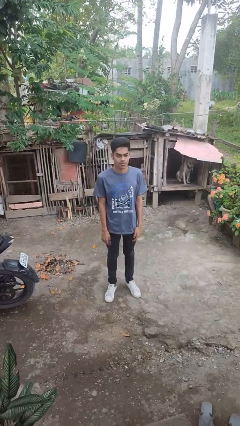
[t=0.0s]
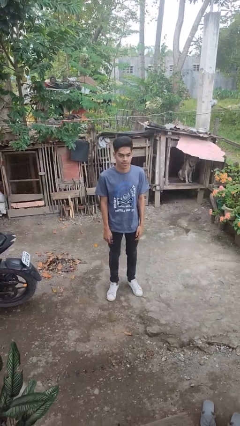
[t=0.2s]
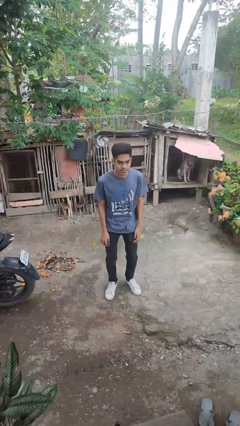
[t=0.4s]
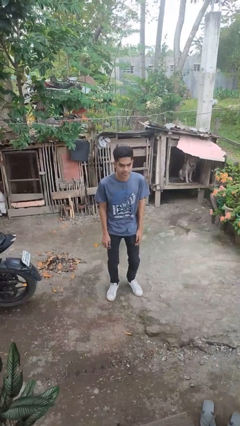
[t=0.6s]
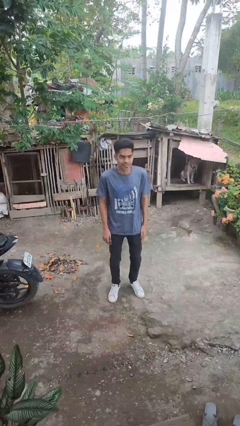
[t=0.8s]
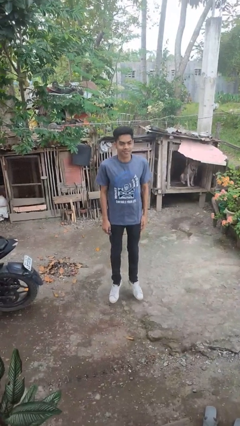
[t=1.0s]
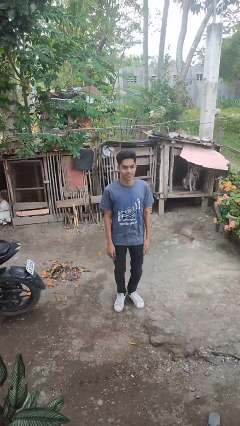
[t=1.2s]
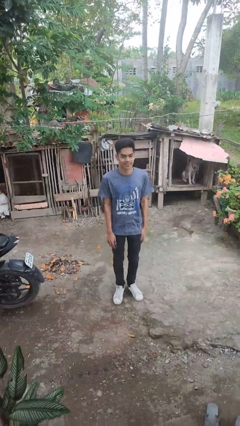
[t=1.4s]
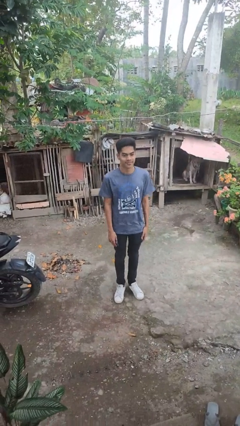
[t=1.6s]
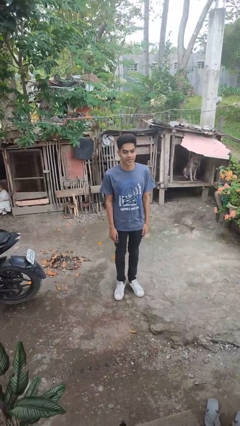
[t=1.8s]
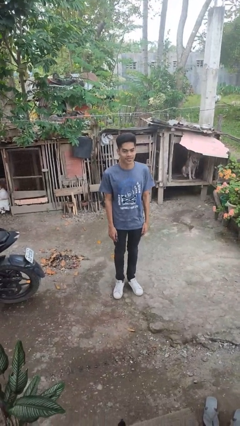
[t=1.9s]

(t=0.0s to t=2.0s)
person jumps

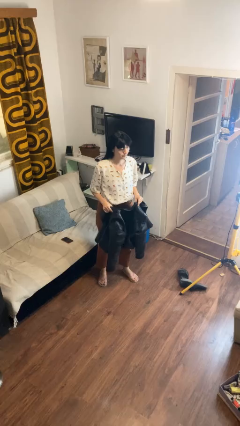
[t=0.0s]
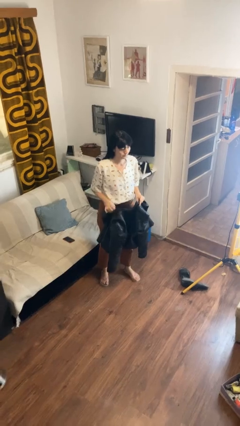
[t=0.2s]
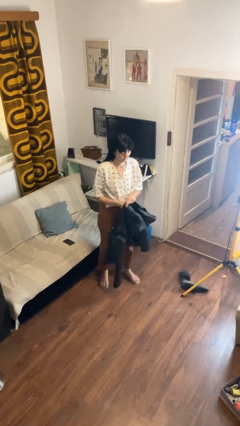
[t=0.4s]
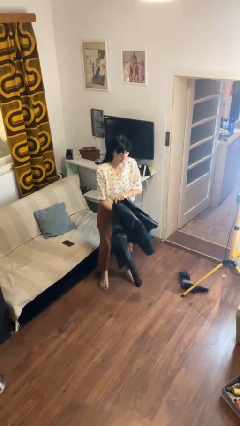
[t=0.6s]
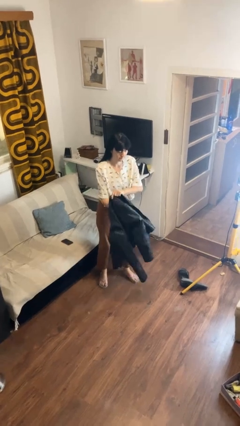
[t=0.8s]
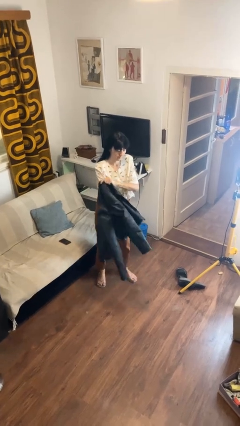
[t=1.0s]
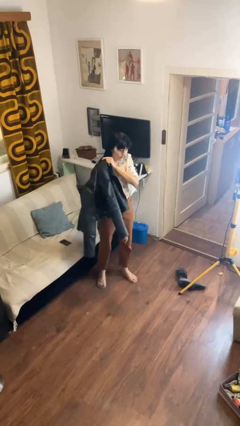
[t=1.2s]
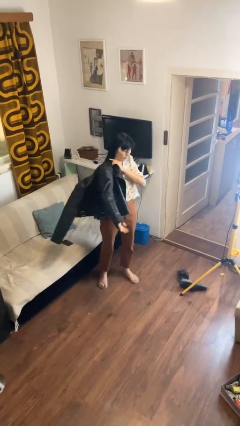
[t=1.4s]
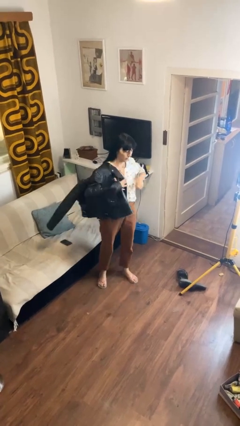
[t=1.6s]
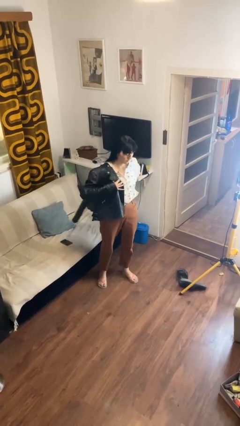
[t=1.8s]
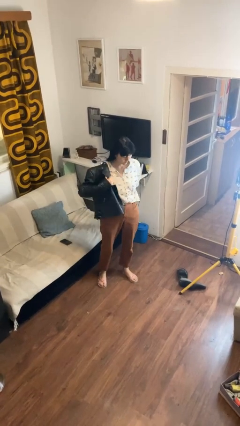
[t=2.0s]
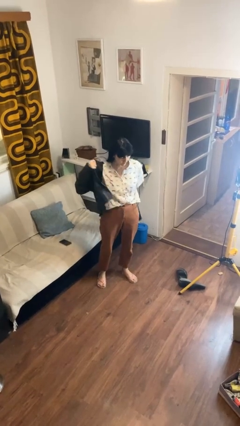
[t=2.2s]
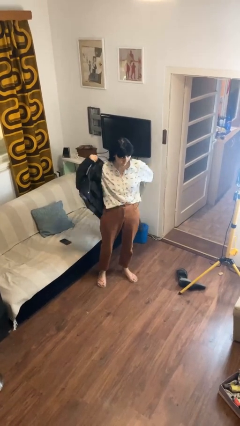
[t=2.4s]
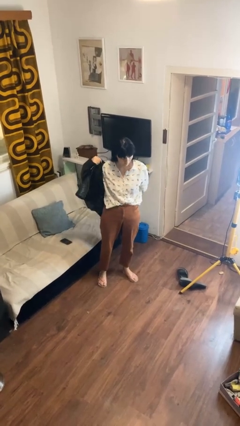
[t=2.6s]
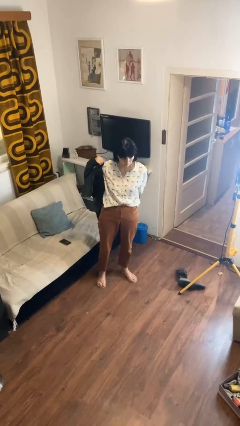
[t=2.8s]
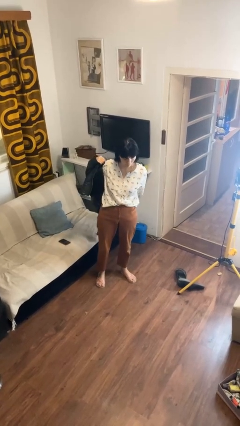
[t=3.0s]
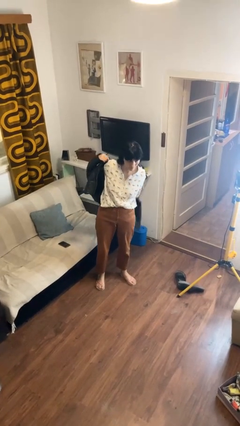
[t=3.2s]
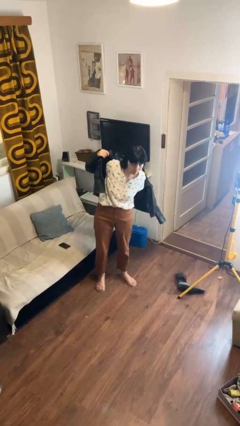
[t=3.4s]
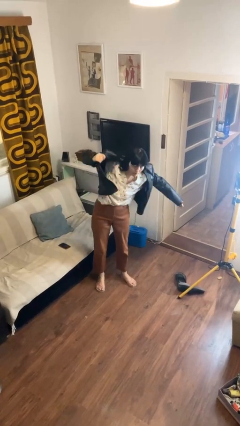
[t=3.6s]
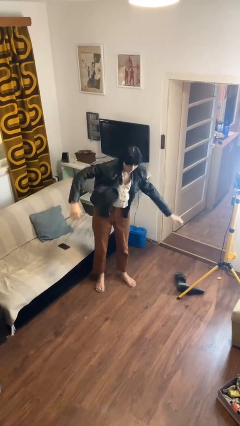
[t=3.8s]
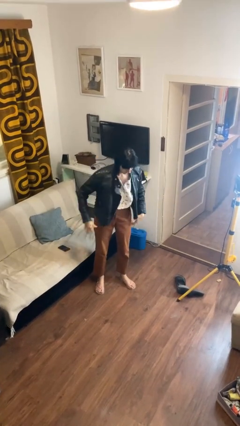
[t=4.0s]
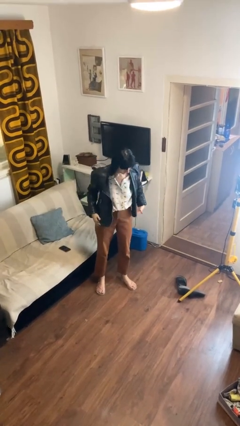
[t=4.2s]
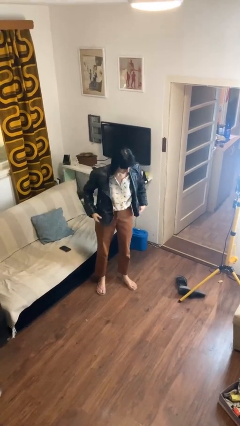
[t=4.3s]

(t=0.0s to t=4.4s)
person puts on jacket

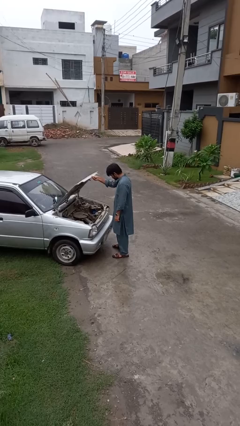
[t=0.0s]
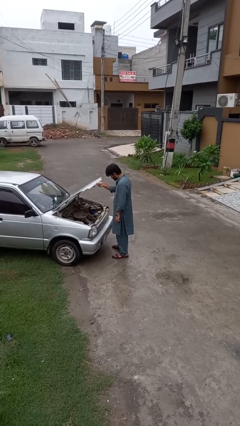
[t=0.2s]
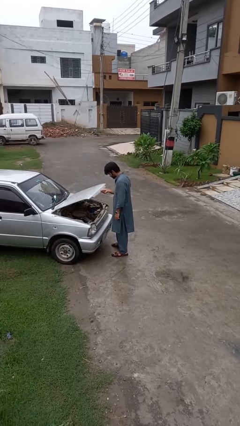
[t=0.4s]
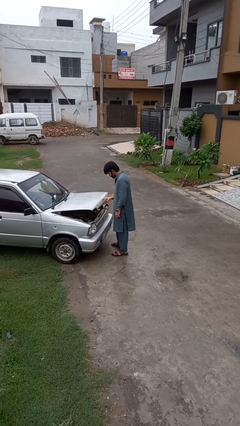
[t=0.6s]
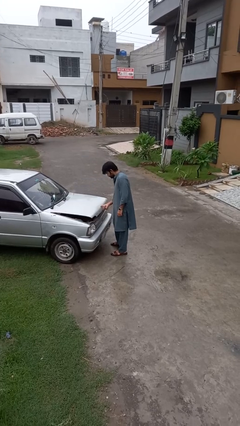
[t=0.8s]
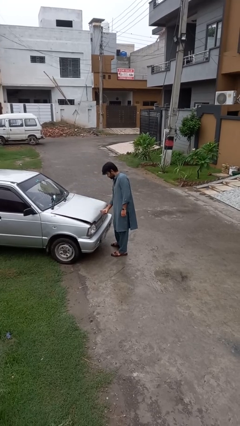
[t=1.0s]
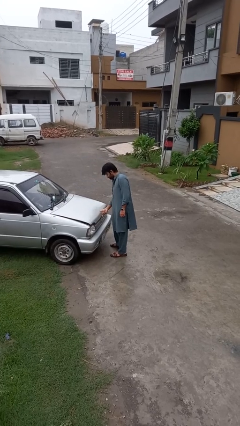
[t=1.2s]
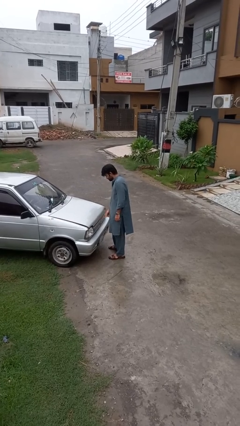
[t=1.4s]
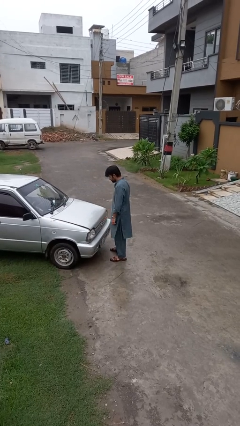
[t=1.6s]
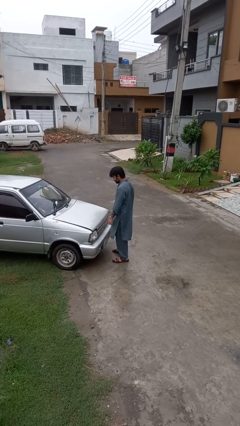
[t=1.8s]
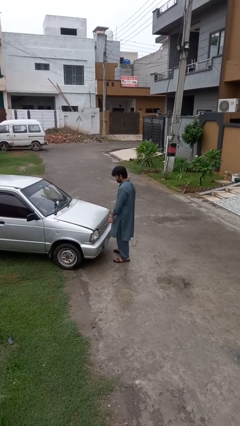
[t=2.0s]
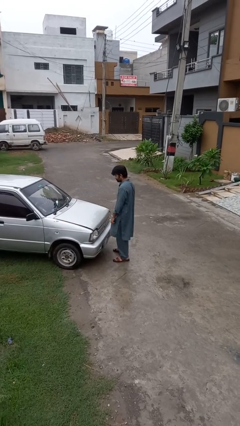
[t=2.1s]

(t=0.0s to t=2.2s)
person closes car hood

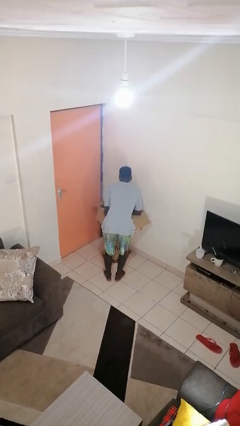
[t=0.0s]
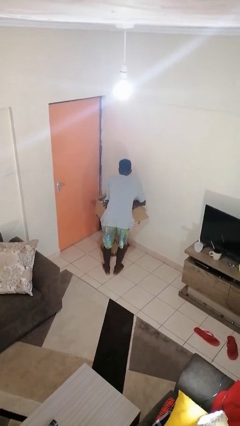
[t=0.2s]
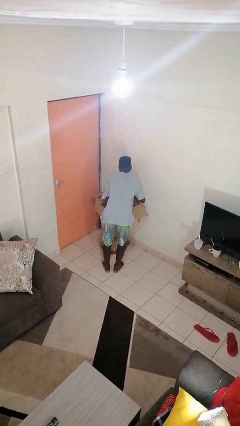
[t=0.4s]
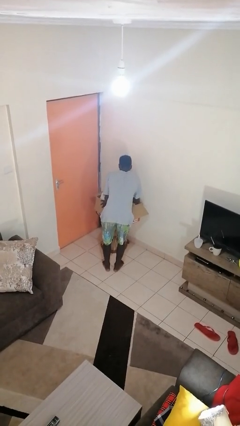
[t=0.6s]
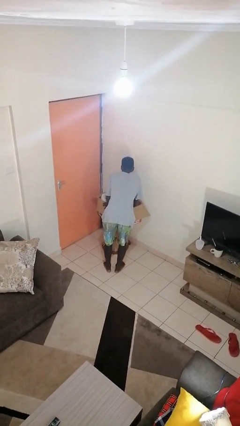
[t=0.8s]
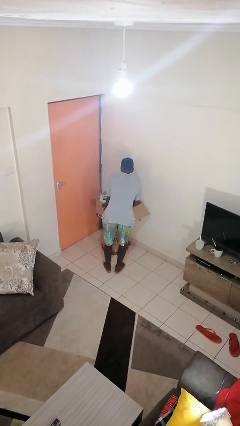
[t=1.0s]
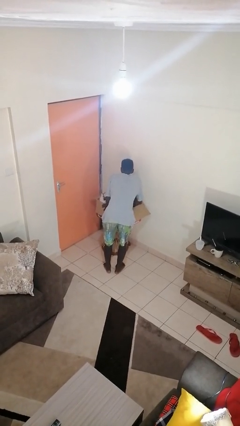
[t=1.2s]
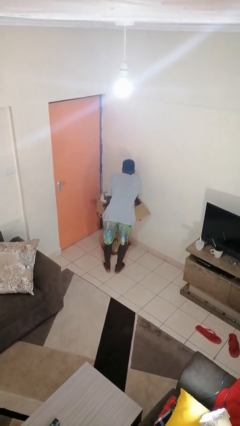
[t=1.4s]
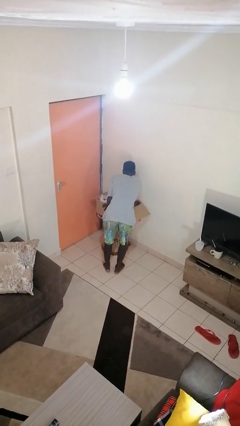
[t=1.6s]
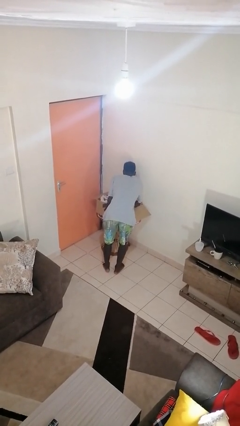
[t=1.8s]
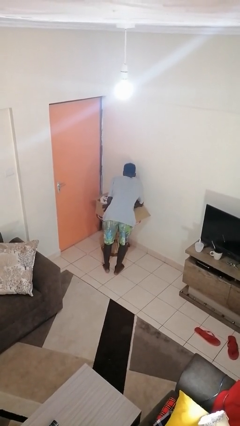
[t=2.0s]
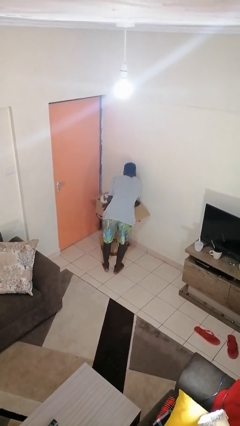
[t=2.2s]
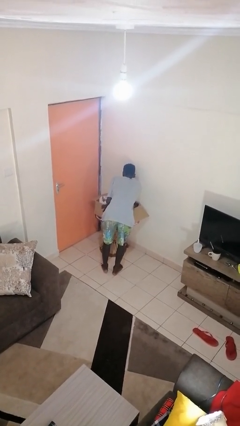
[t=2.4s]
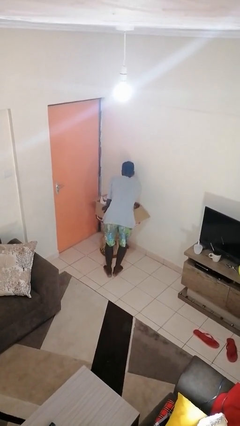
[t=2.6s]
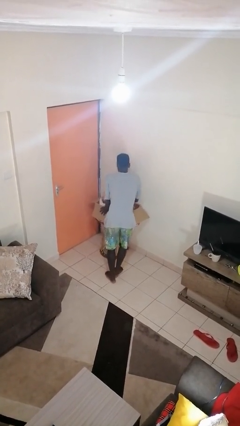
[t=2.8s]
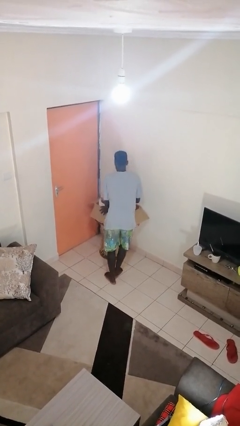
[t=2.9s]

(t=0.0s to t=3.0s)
person searches in box

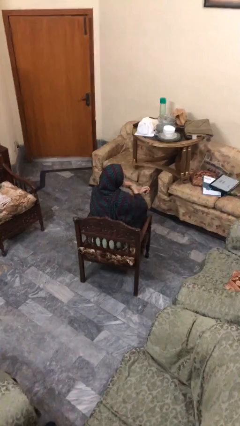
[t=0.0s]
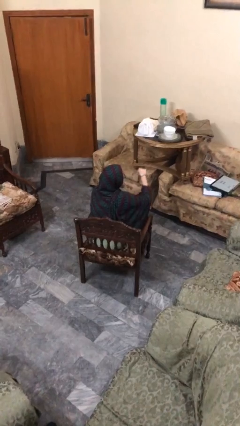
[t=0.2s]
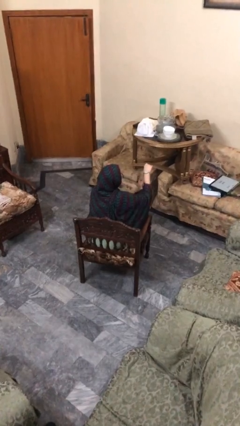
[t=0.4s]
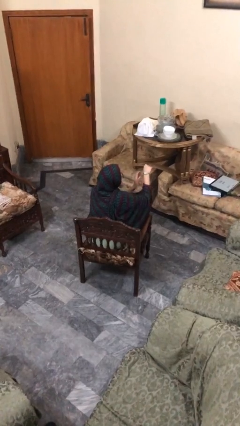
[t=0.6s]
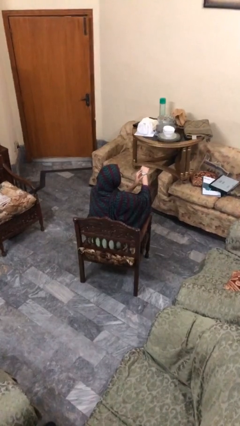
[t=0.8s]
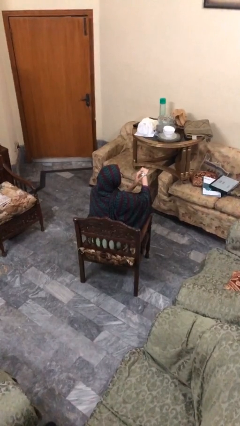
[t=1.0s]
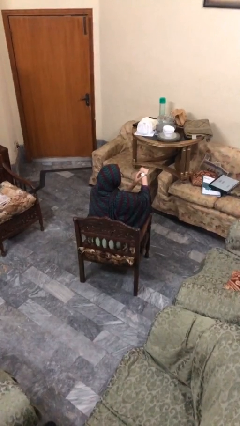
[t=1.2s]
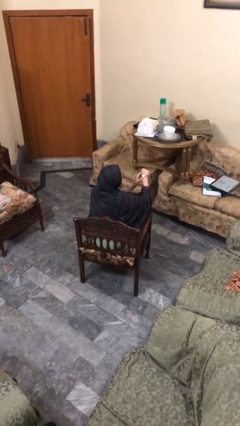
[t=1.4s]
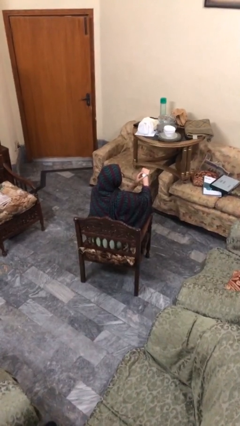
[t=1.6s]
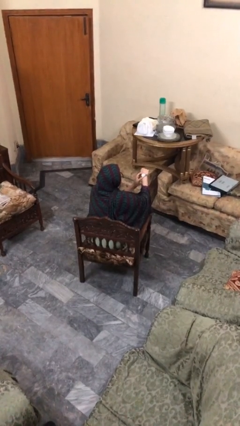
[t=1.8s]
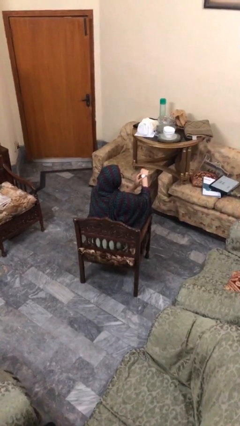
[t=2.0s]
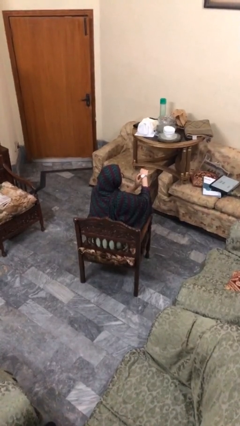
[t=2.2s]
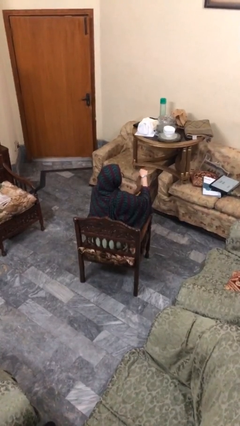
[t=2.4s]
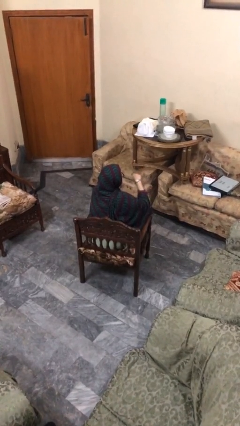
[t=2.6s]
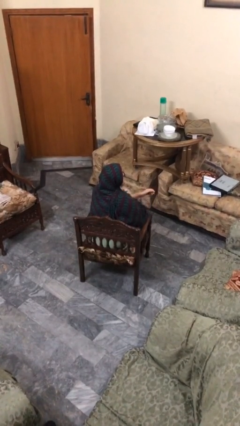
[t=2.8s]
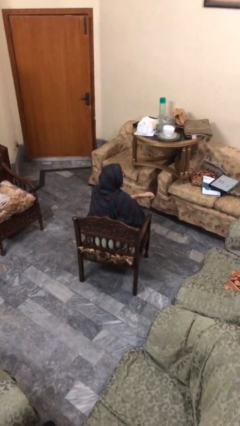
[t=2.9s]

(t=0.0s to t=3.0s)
person looks at wristwatch

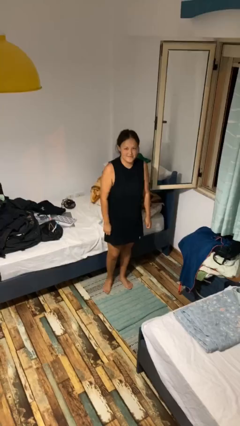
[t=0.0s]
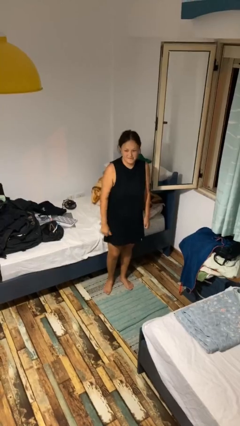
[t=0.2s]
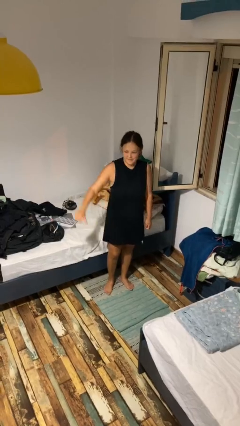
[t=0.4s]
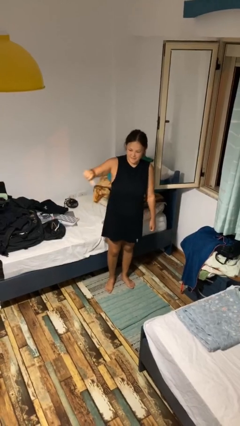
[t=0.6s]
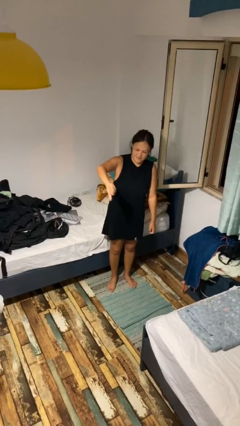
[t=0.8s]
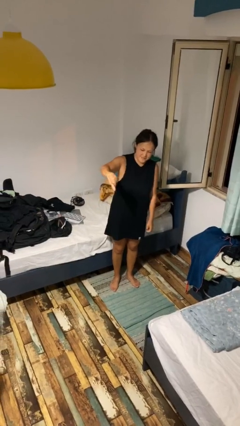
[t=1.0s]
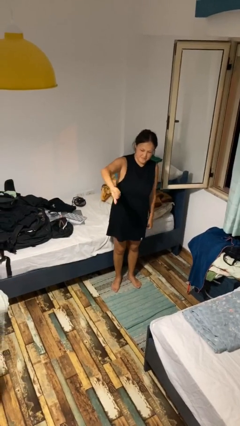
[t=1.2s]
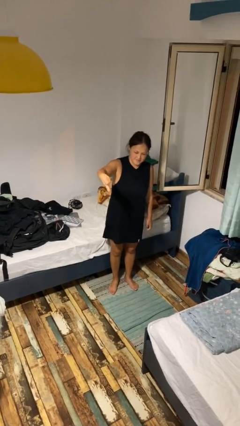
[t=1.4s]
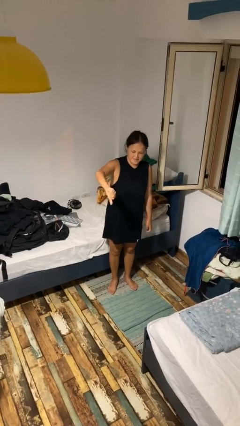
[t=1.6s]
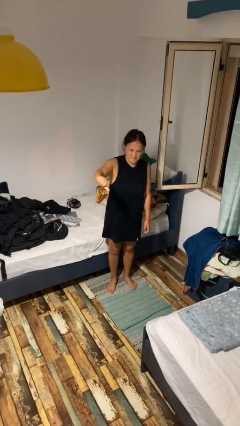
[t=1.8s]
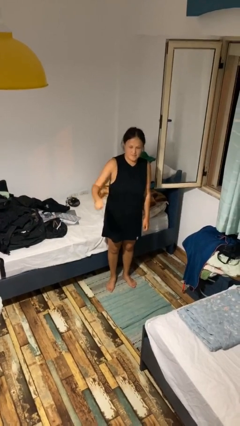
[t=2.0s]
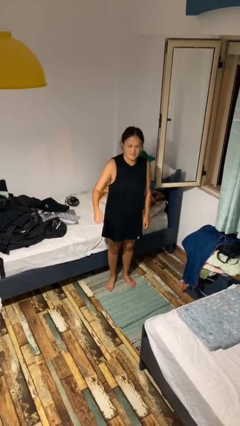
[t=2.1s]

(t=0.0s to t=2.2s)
person gestures thumbs down

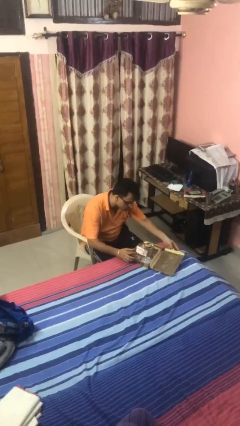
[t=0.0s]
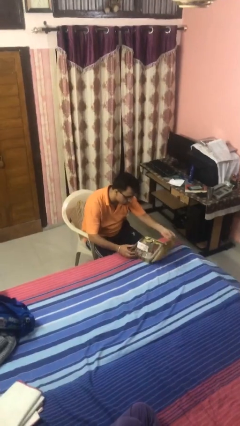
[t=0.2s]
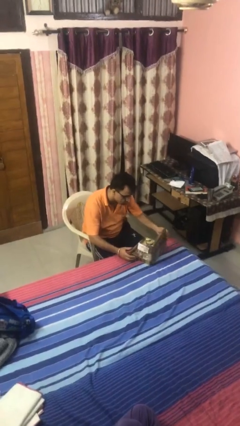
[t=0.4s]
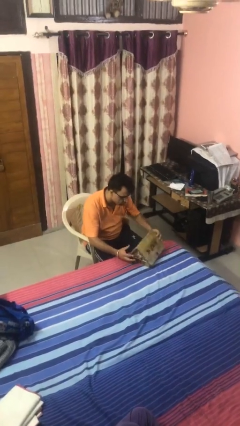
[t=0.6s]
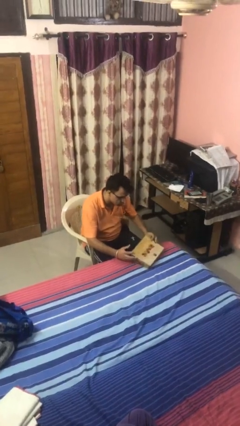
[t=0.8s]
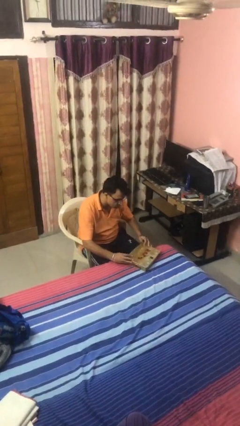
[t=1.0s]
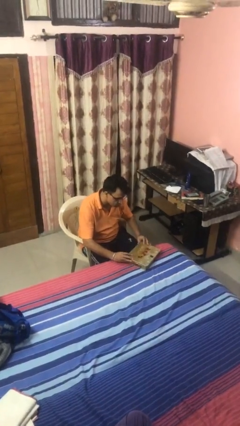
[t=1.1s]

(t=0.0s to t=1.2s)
person closes jewelry box
